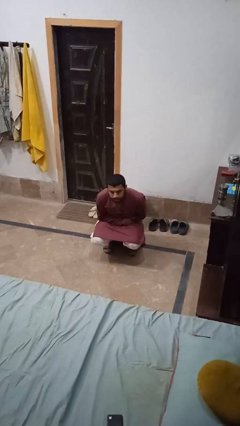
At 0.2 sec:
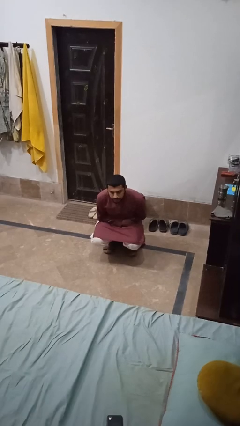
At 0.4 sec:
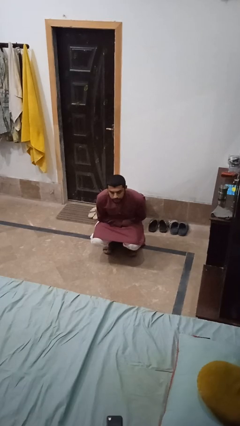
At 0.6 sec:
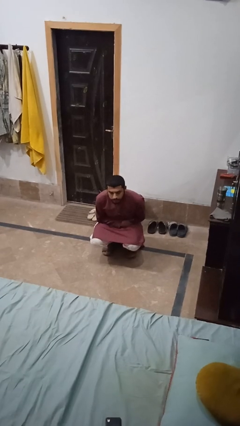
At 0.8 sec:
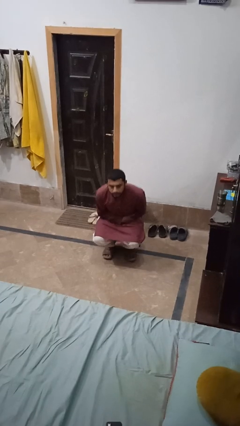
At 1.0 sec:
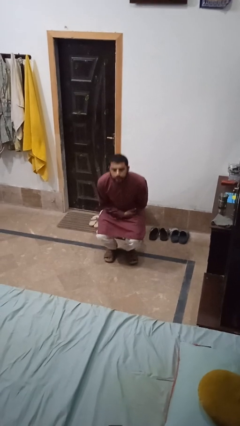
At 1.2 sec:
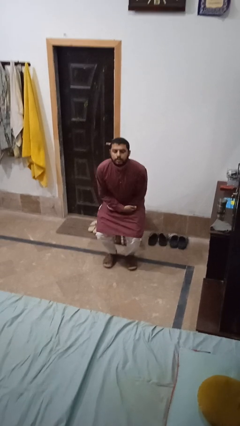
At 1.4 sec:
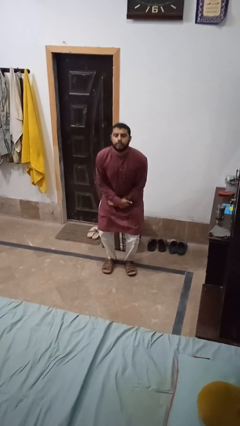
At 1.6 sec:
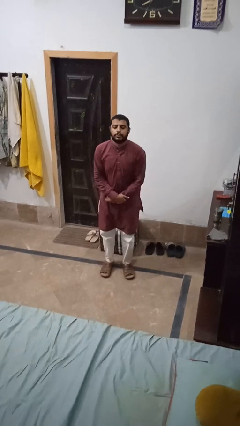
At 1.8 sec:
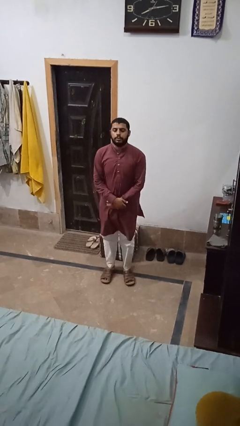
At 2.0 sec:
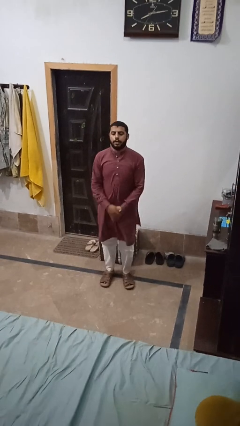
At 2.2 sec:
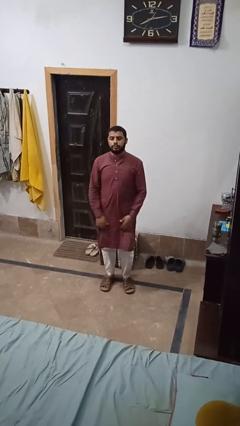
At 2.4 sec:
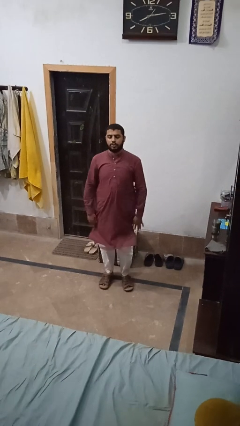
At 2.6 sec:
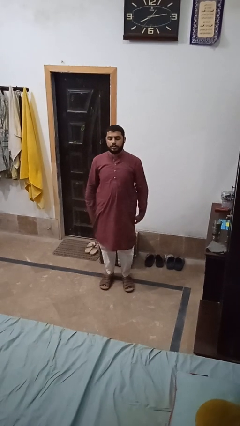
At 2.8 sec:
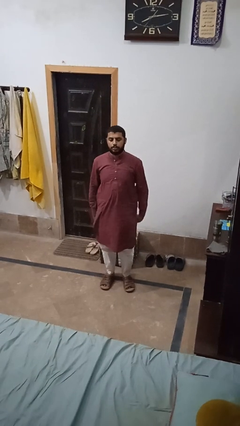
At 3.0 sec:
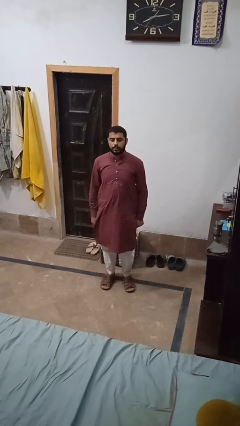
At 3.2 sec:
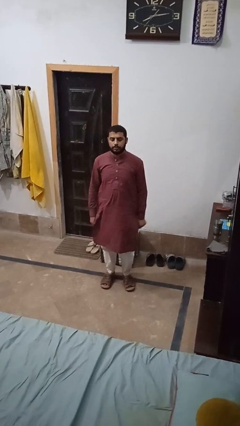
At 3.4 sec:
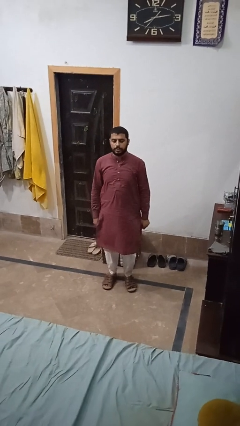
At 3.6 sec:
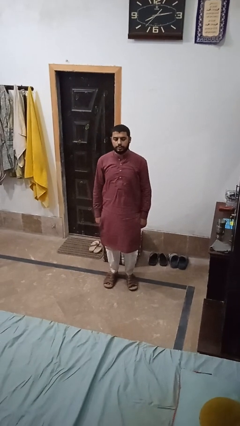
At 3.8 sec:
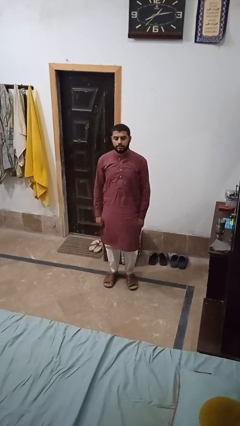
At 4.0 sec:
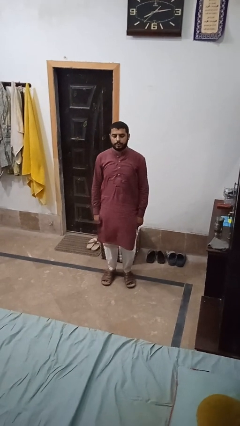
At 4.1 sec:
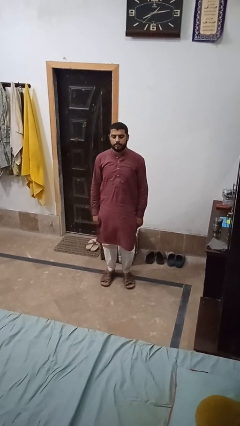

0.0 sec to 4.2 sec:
person stands up

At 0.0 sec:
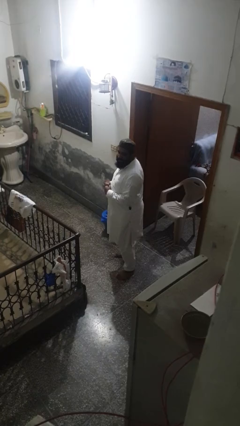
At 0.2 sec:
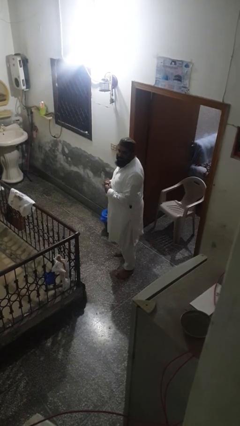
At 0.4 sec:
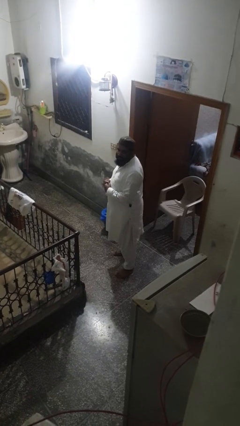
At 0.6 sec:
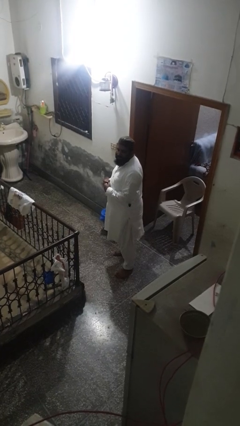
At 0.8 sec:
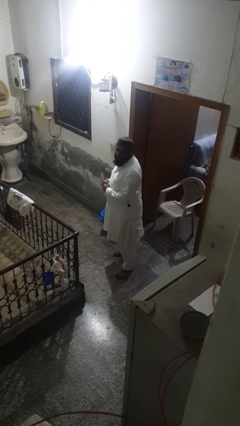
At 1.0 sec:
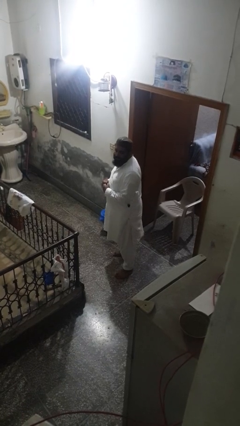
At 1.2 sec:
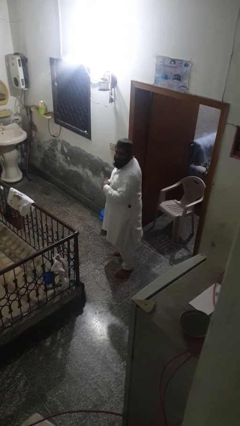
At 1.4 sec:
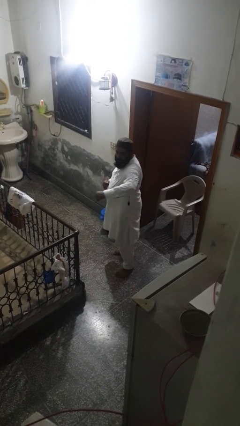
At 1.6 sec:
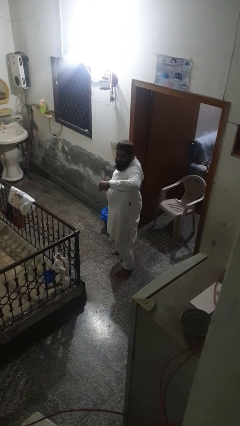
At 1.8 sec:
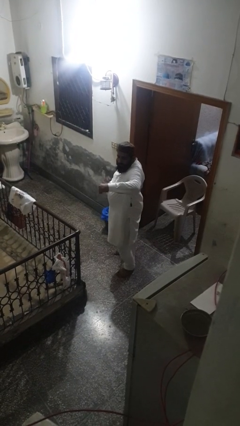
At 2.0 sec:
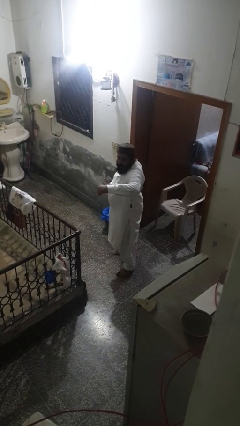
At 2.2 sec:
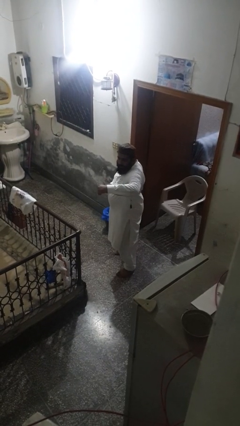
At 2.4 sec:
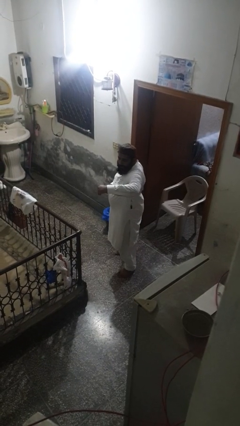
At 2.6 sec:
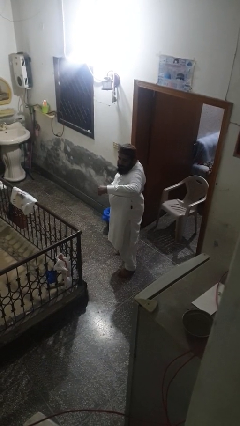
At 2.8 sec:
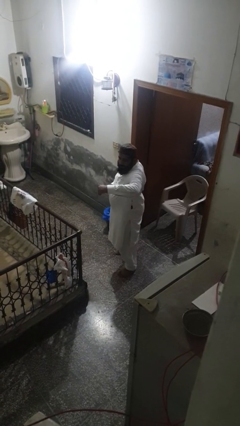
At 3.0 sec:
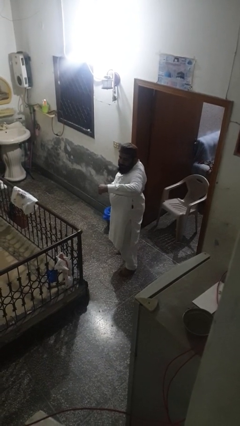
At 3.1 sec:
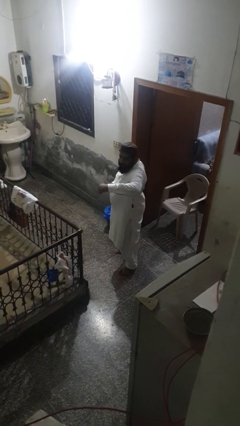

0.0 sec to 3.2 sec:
person karate chop

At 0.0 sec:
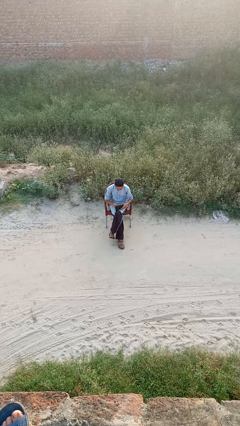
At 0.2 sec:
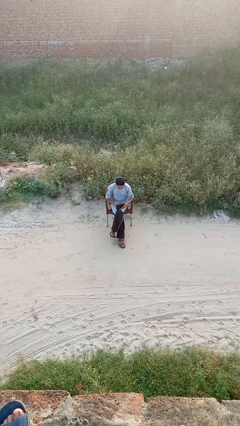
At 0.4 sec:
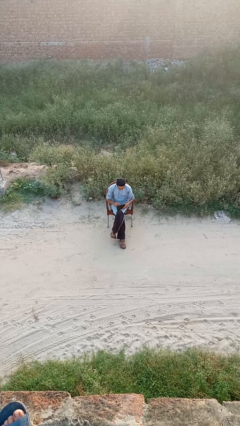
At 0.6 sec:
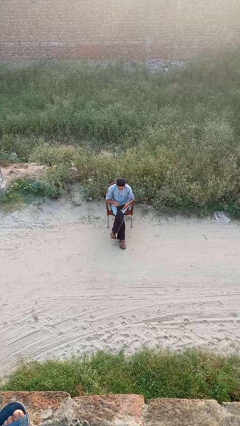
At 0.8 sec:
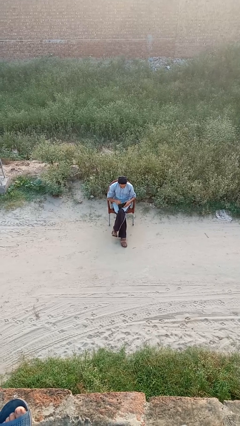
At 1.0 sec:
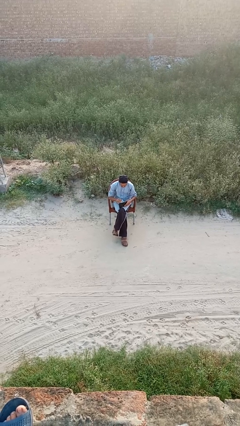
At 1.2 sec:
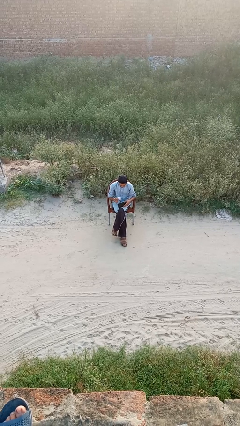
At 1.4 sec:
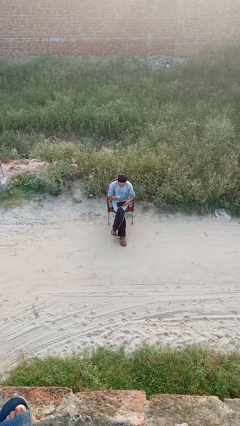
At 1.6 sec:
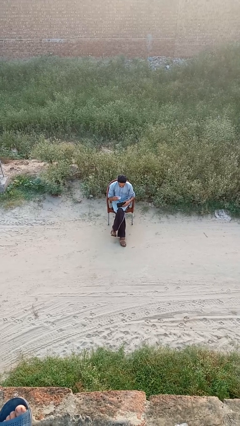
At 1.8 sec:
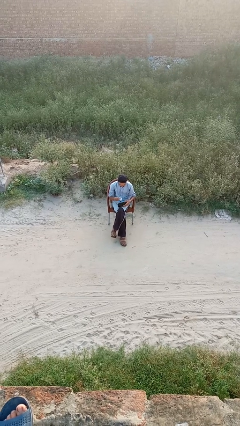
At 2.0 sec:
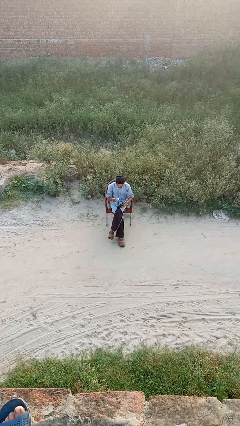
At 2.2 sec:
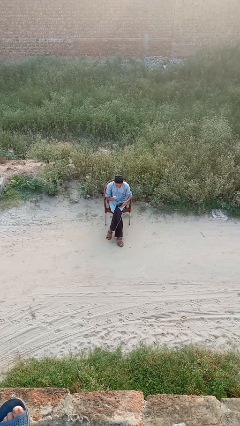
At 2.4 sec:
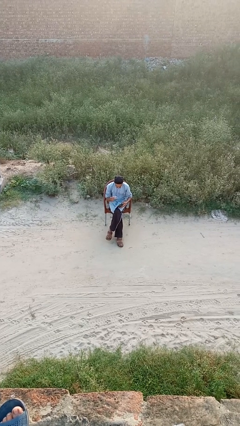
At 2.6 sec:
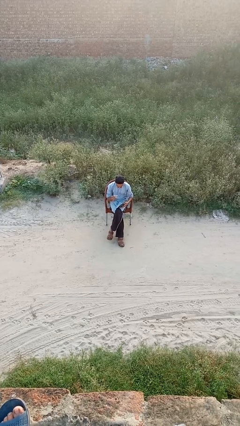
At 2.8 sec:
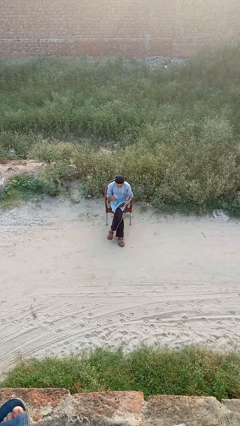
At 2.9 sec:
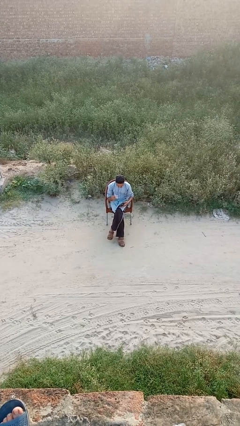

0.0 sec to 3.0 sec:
person takes object from purse

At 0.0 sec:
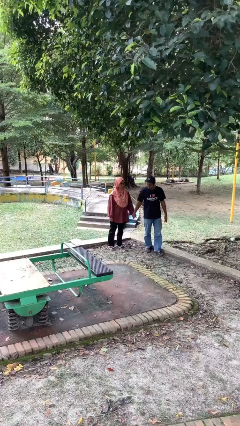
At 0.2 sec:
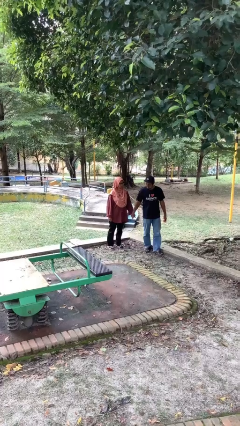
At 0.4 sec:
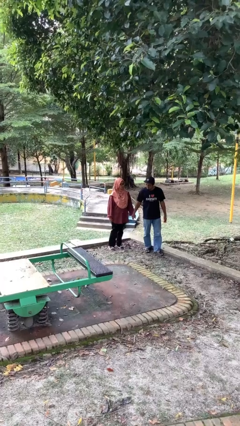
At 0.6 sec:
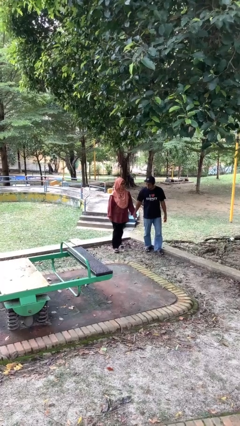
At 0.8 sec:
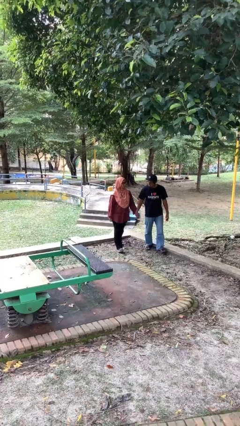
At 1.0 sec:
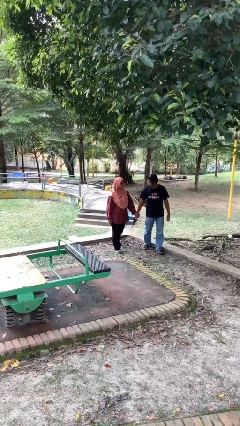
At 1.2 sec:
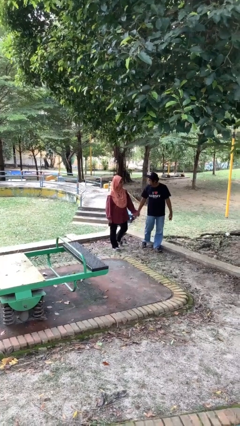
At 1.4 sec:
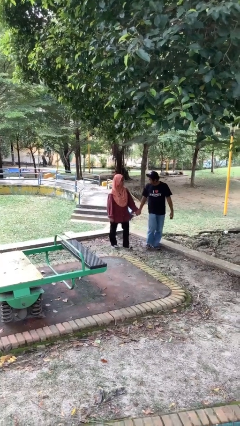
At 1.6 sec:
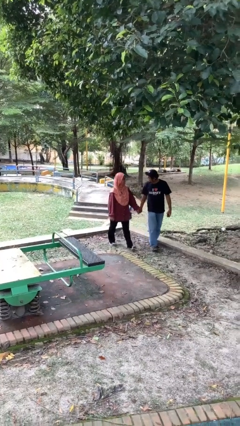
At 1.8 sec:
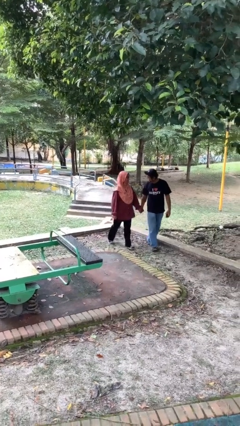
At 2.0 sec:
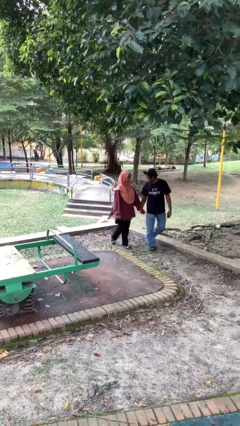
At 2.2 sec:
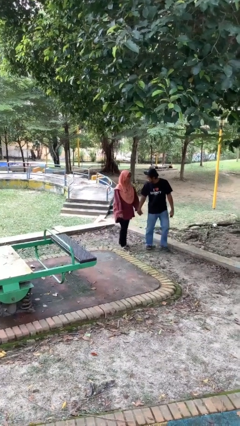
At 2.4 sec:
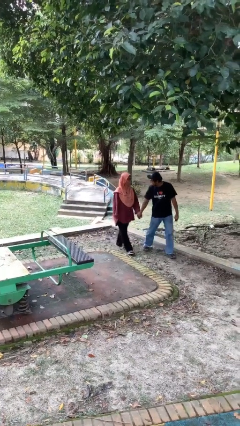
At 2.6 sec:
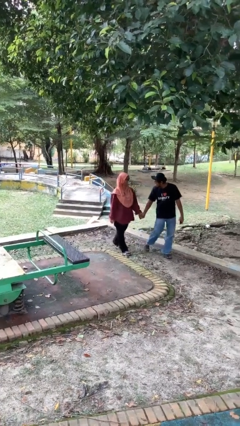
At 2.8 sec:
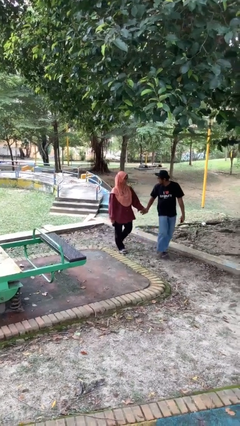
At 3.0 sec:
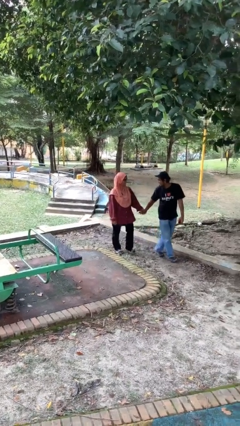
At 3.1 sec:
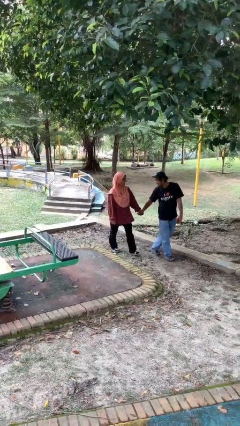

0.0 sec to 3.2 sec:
person holds hand

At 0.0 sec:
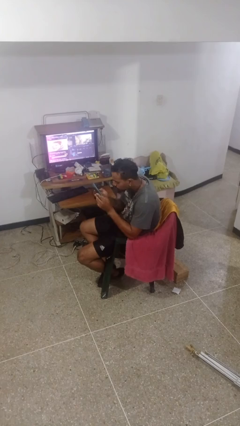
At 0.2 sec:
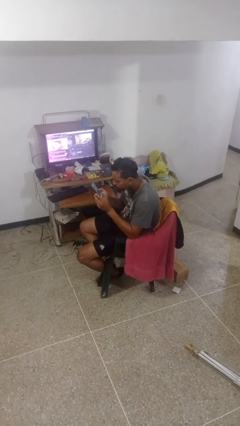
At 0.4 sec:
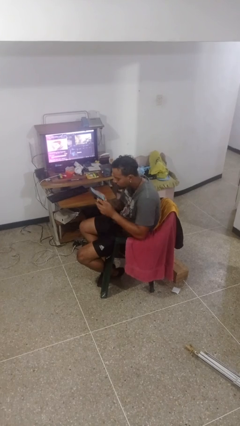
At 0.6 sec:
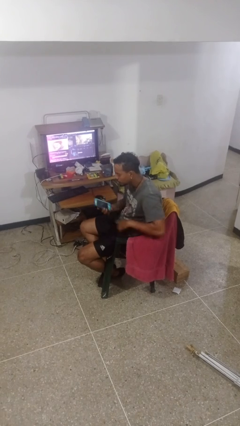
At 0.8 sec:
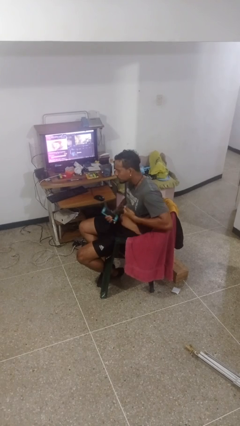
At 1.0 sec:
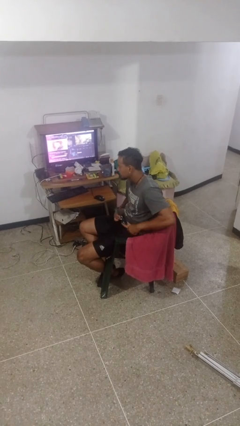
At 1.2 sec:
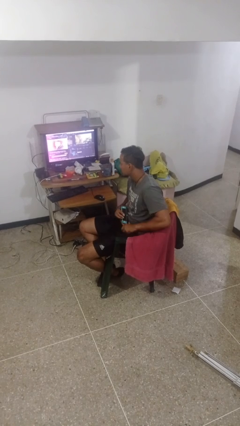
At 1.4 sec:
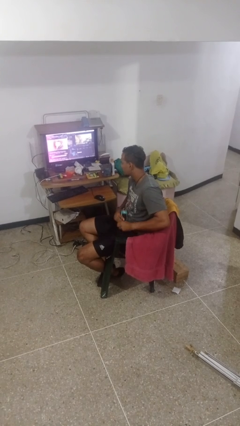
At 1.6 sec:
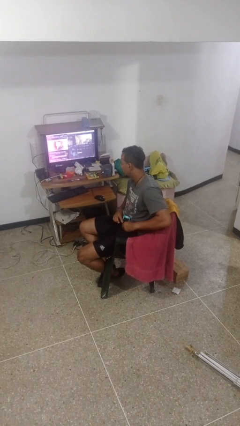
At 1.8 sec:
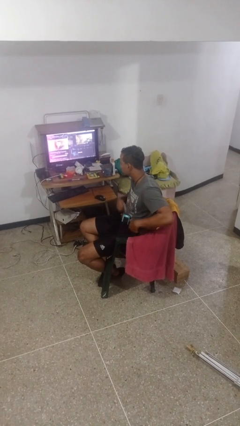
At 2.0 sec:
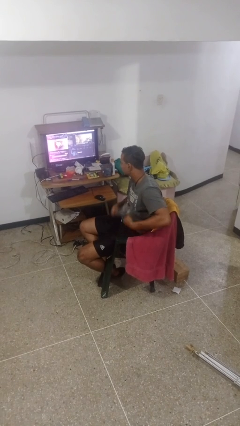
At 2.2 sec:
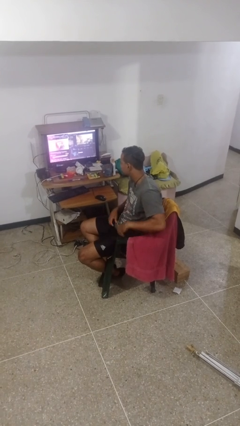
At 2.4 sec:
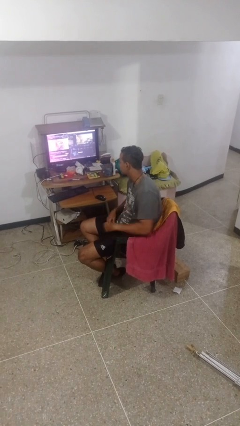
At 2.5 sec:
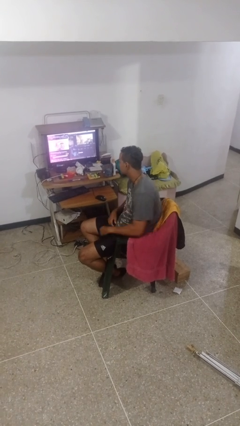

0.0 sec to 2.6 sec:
person puts phone into pocket

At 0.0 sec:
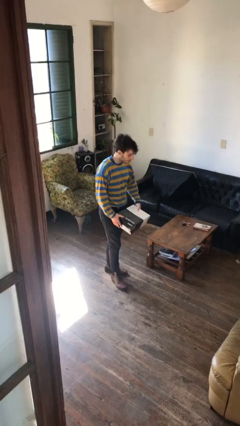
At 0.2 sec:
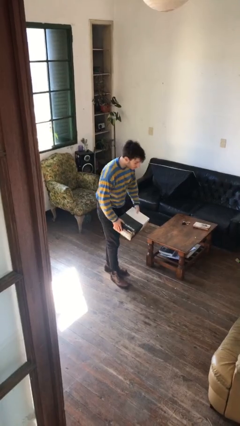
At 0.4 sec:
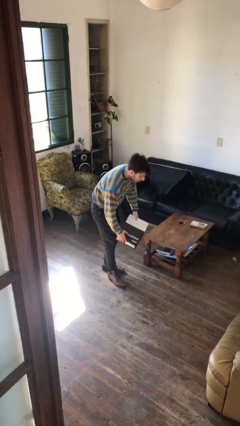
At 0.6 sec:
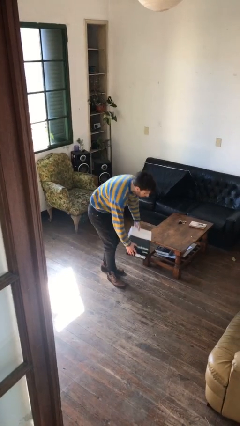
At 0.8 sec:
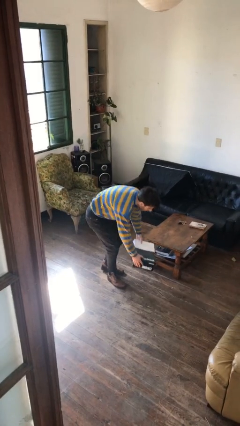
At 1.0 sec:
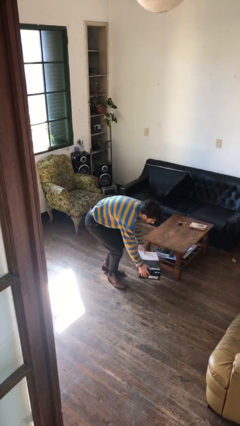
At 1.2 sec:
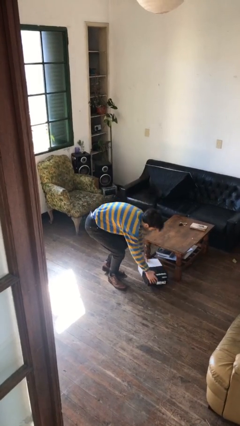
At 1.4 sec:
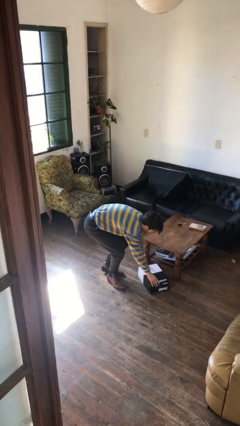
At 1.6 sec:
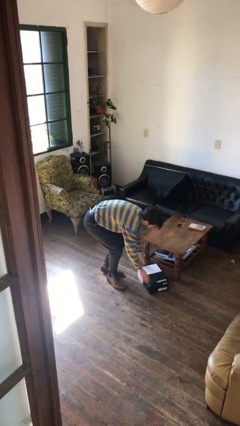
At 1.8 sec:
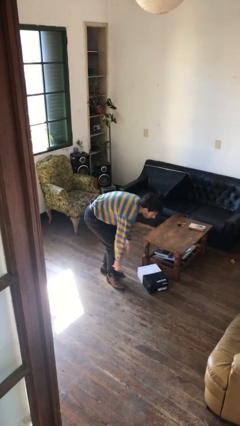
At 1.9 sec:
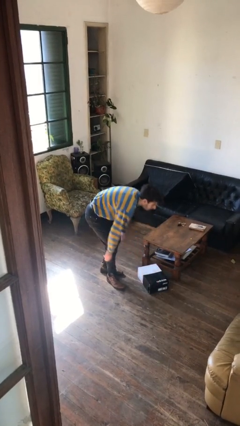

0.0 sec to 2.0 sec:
person puts down object on floor